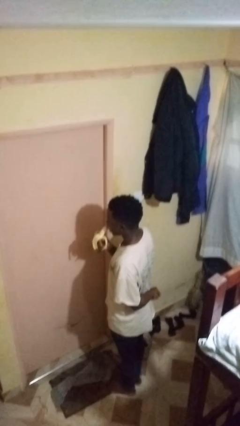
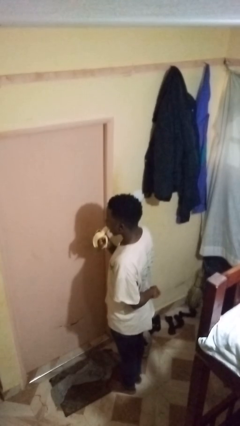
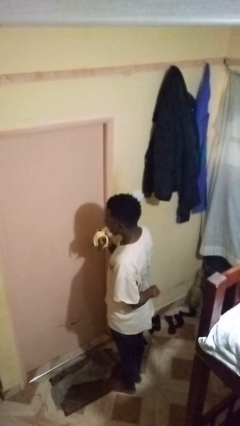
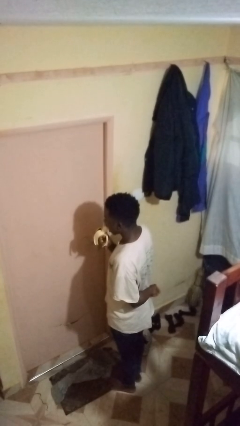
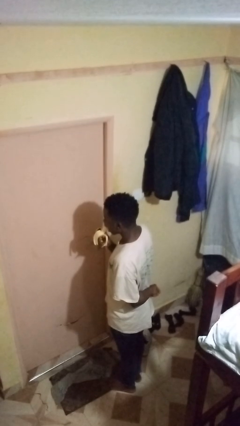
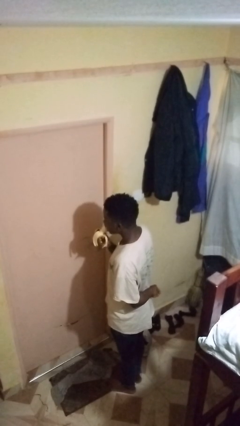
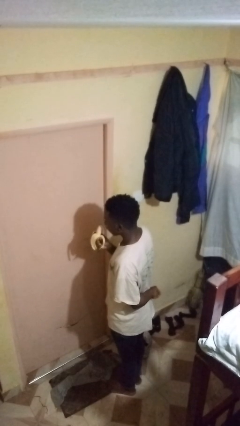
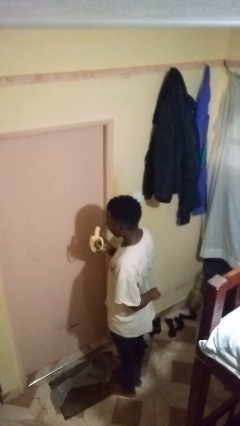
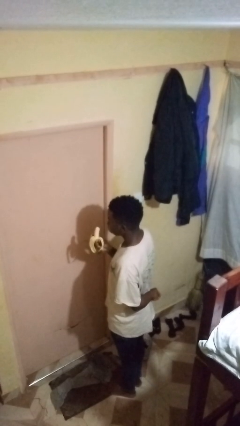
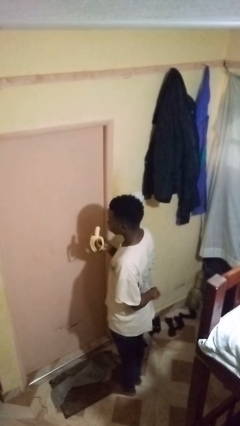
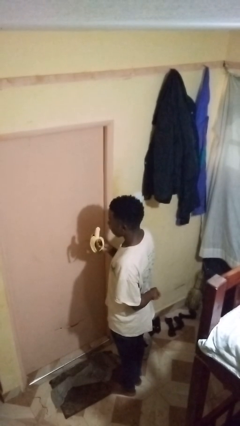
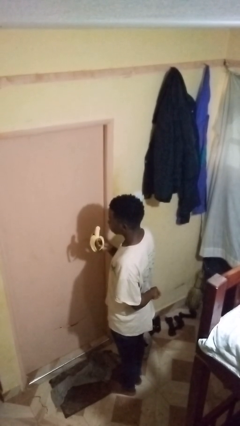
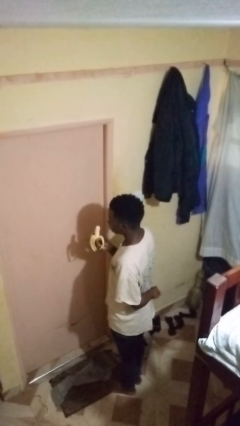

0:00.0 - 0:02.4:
person eats banana

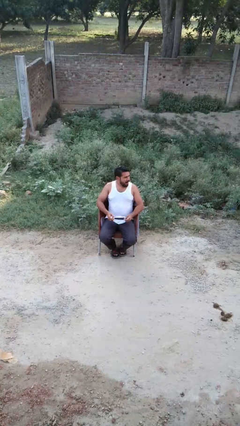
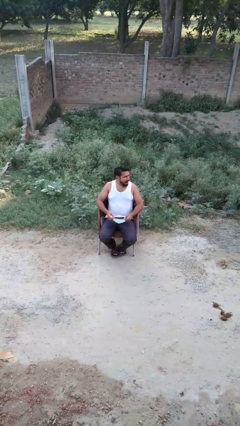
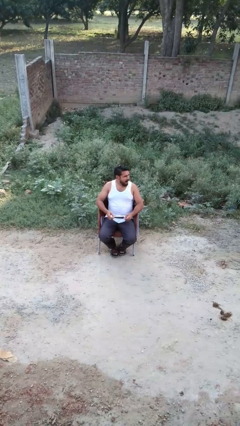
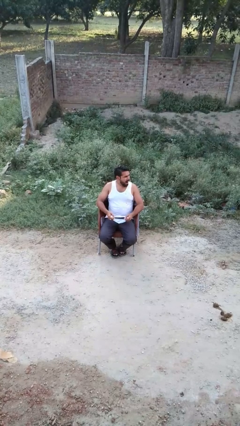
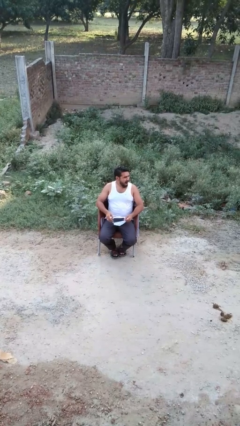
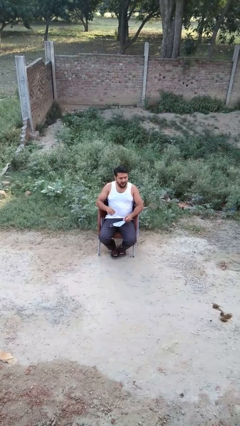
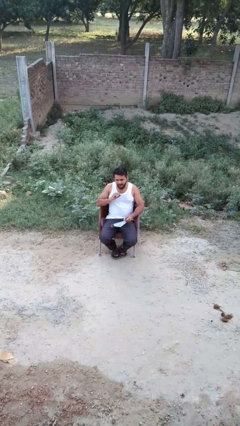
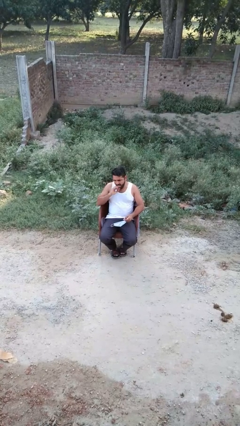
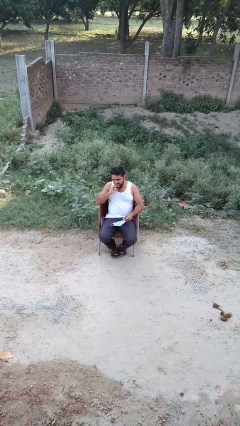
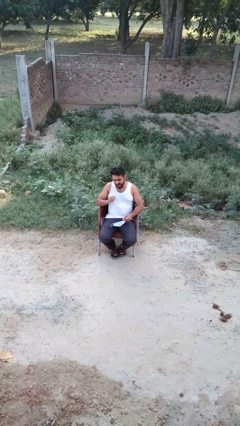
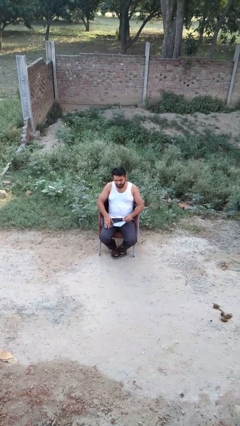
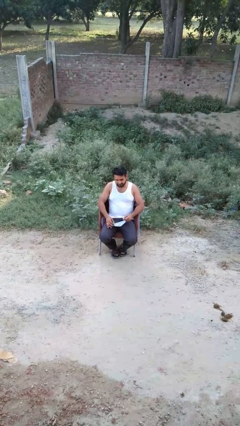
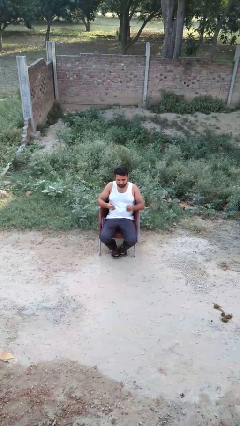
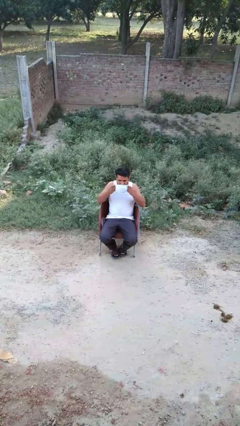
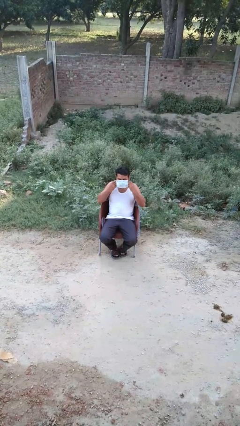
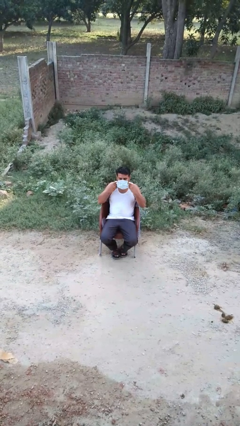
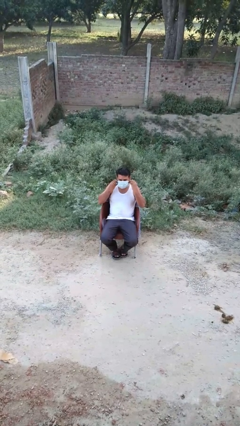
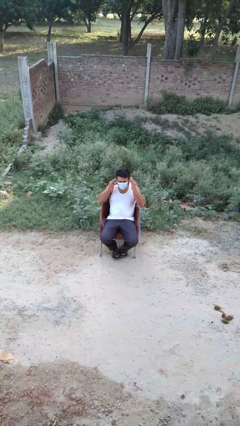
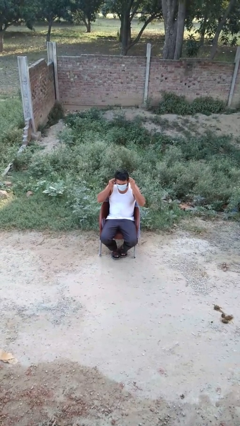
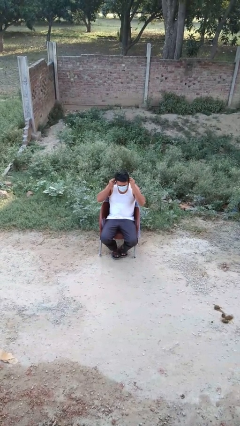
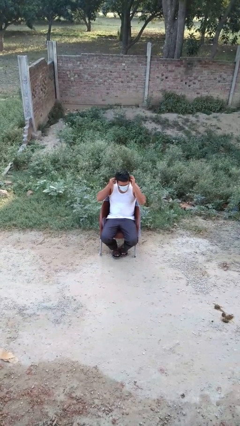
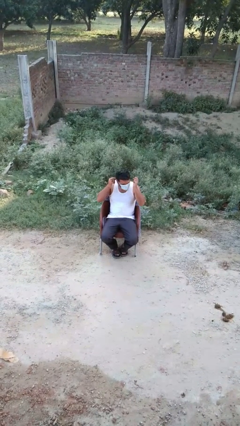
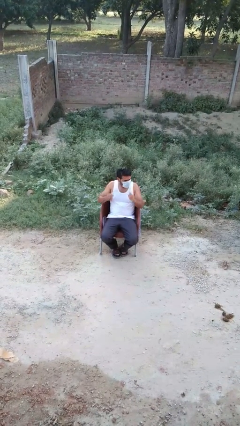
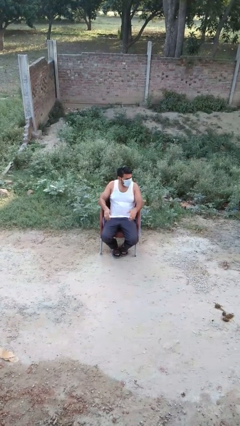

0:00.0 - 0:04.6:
person puts on facemask

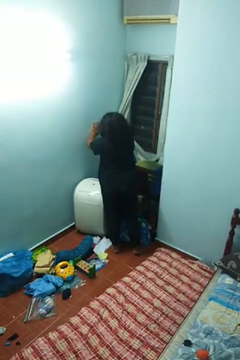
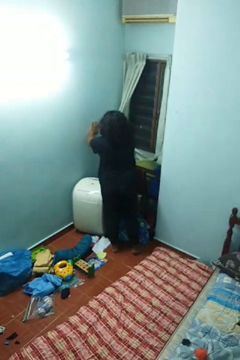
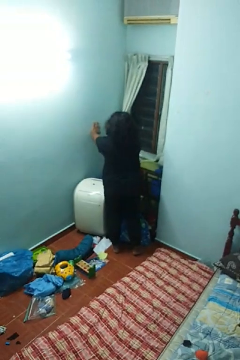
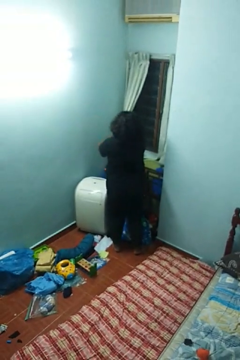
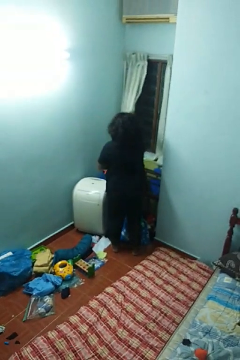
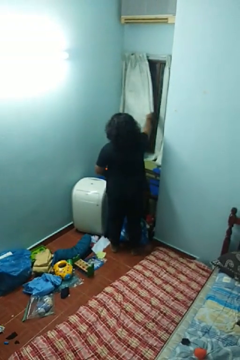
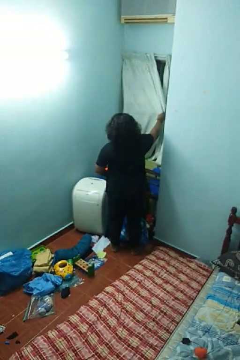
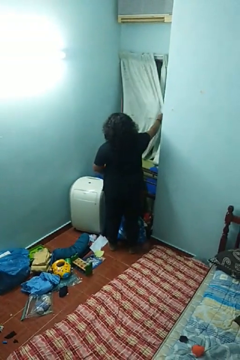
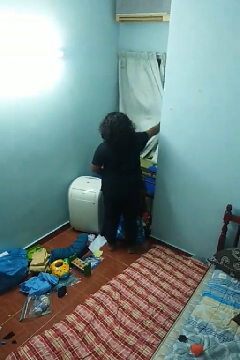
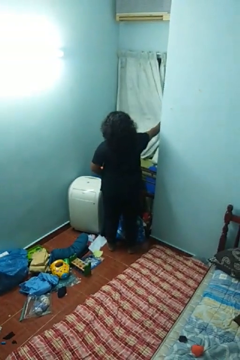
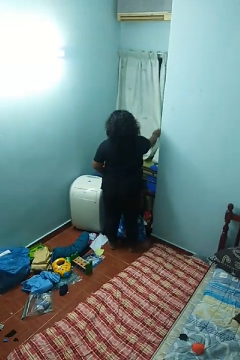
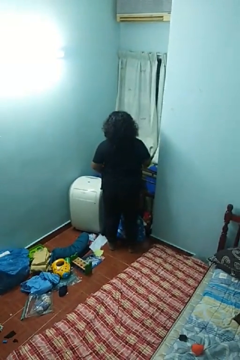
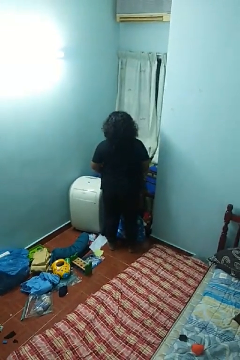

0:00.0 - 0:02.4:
person closes curtains

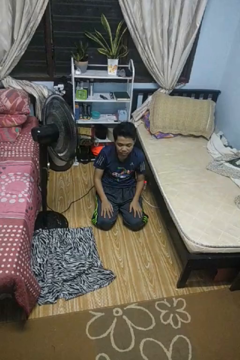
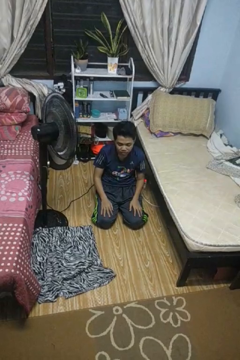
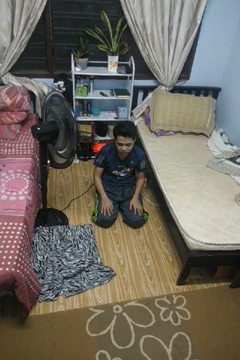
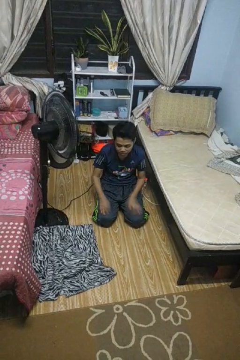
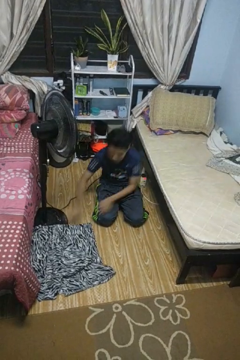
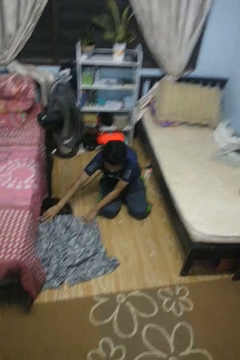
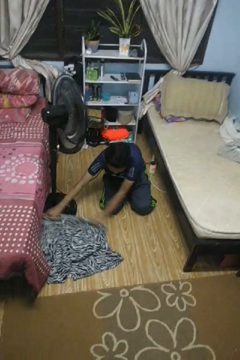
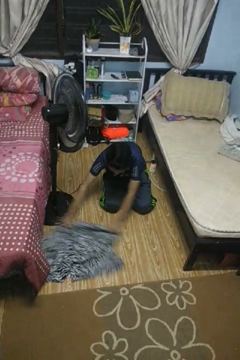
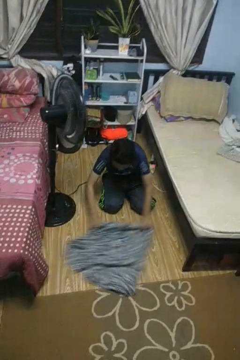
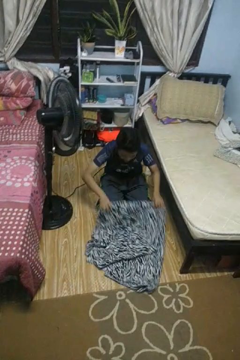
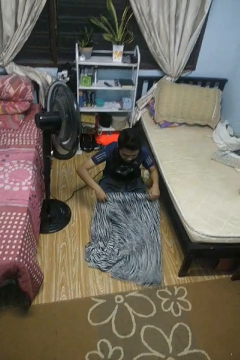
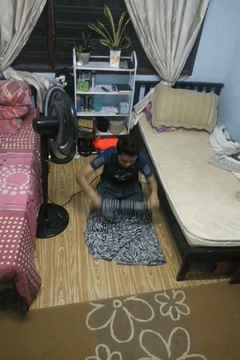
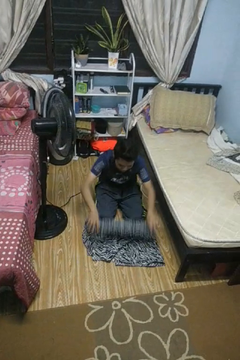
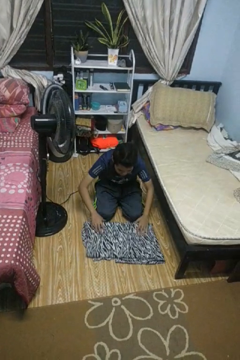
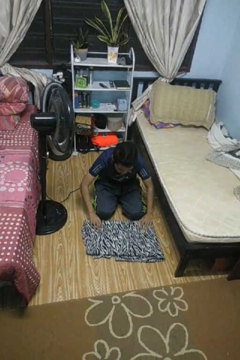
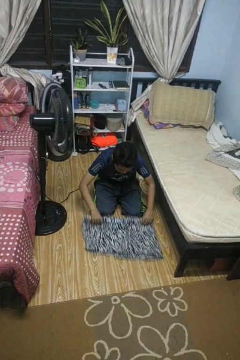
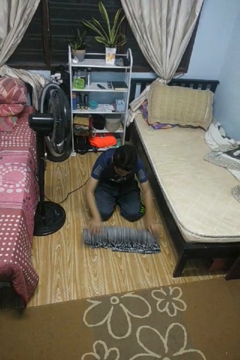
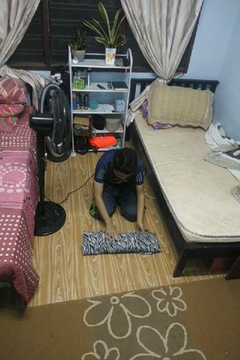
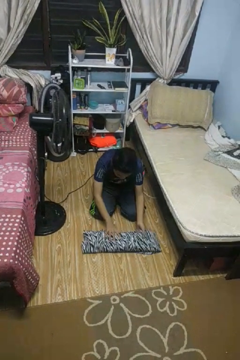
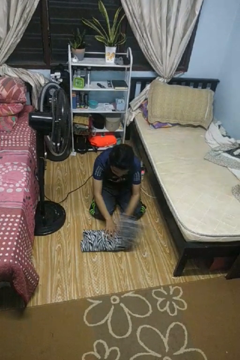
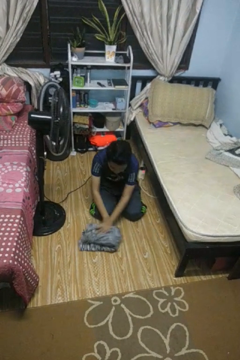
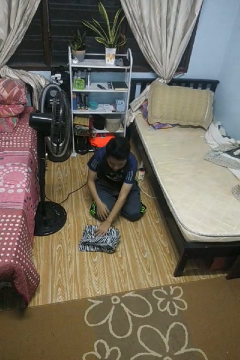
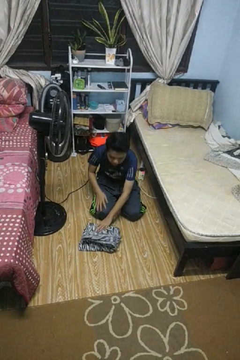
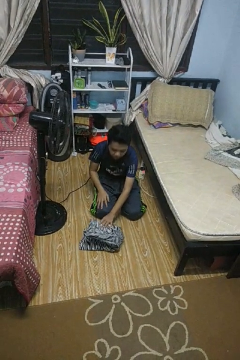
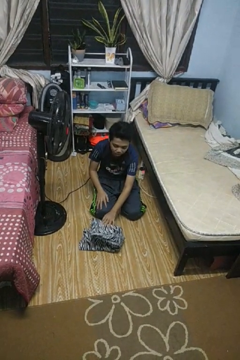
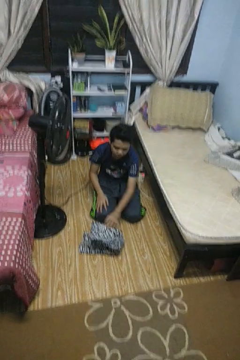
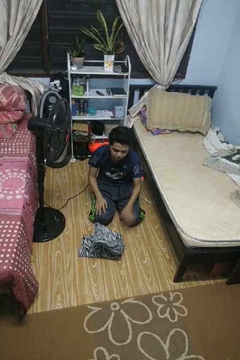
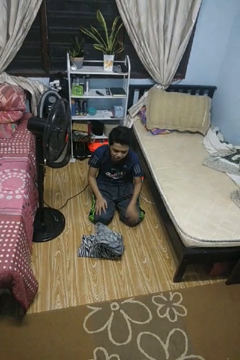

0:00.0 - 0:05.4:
person folds blanket

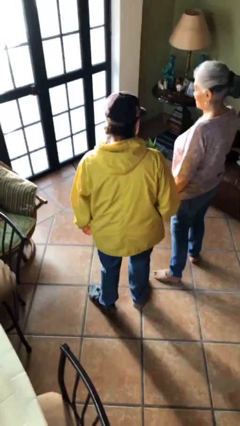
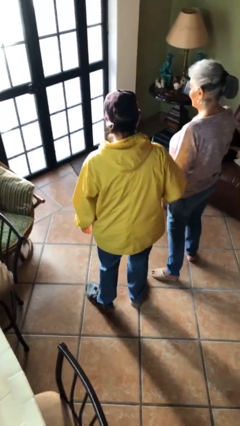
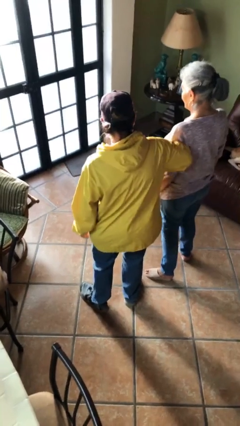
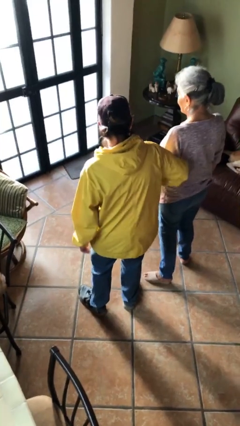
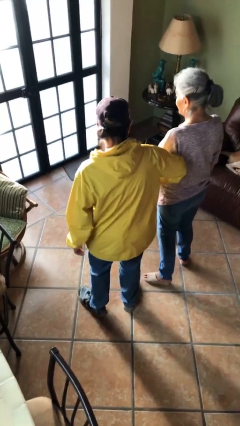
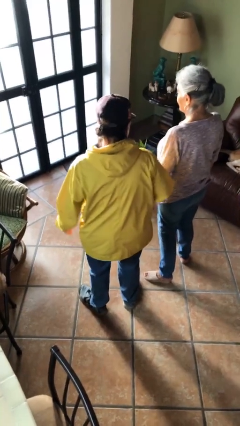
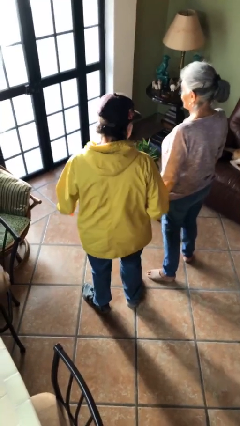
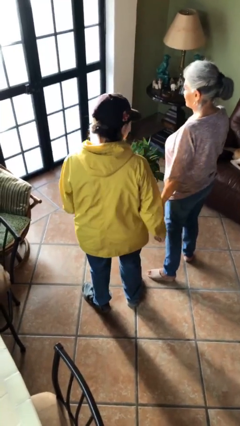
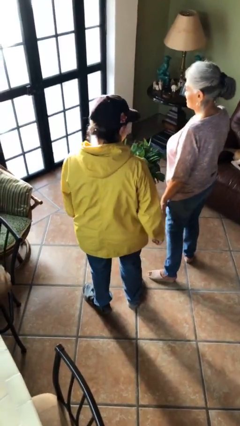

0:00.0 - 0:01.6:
person nudges person with elbow

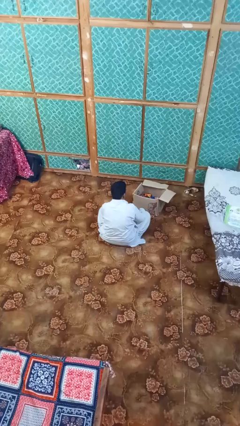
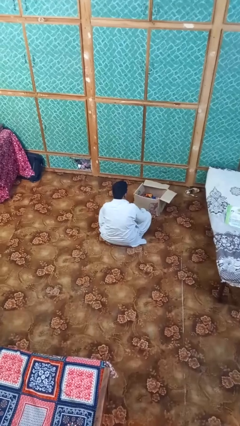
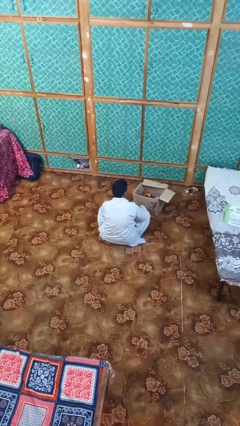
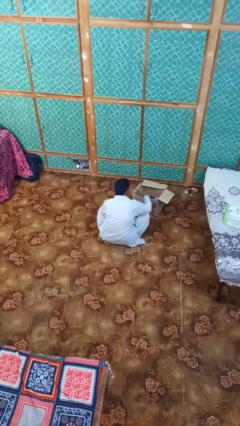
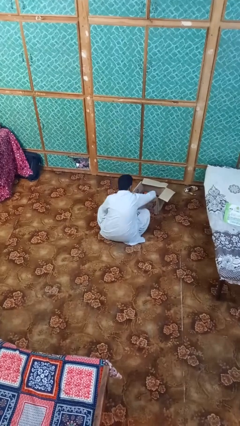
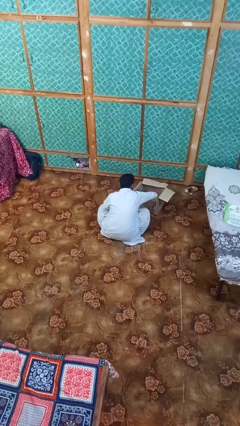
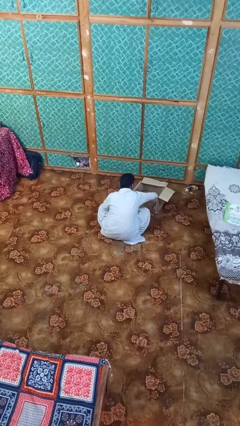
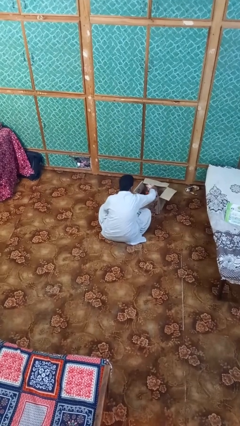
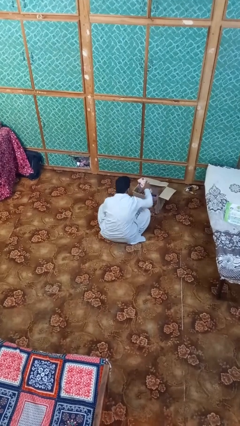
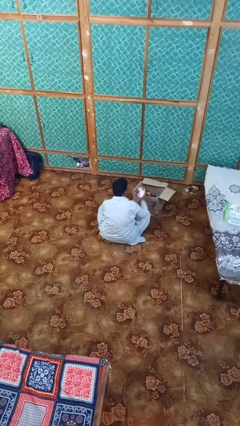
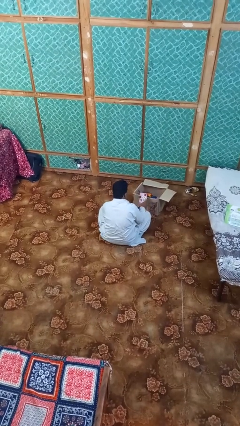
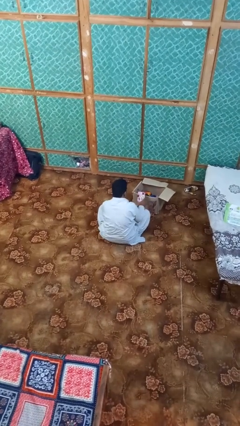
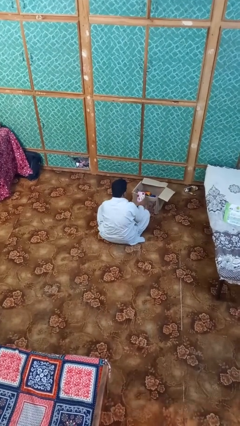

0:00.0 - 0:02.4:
person takes object from box
